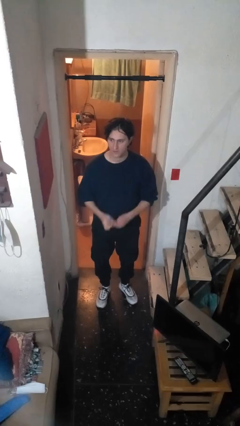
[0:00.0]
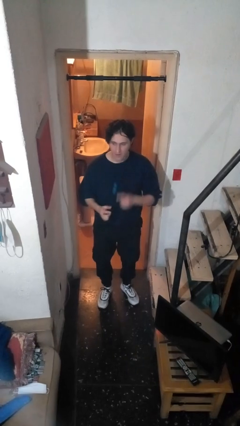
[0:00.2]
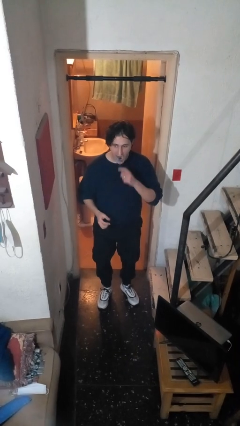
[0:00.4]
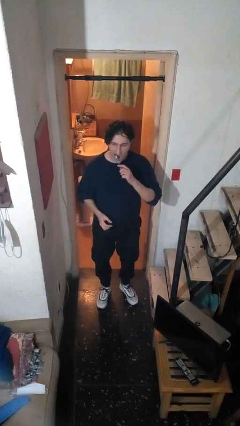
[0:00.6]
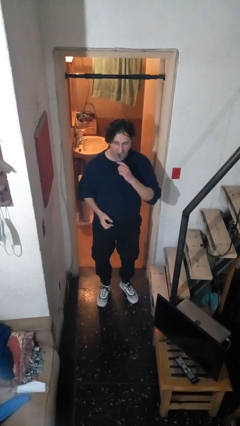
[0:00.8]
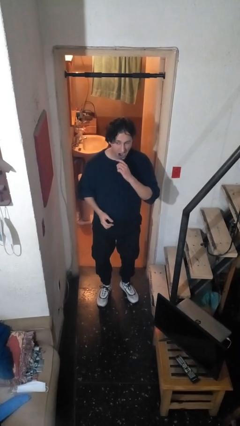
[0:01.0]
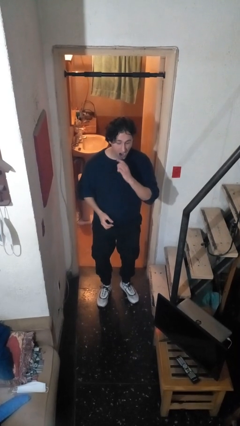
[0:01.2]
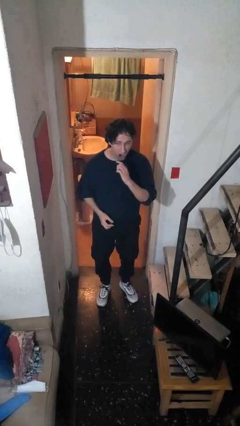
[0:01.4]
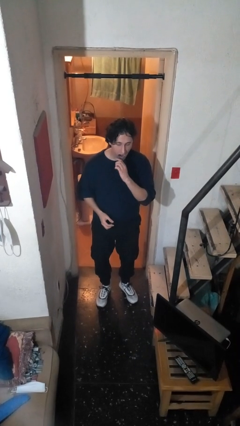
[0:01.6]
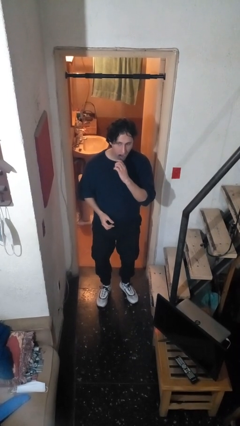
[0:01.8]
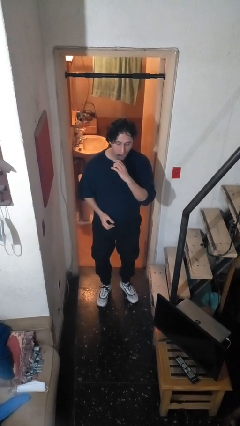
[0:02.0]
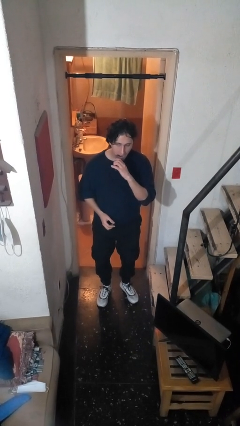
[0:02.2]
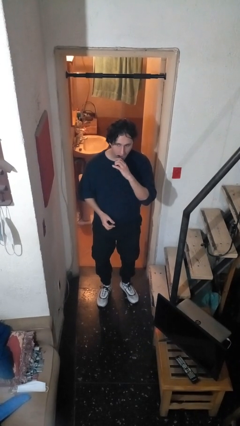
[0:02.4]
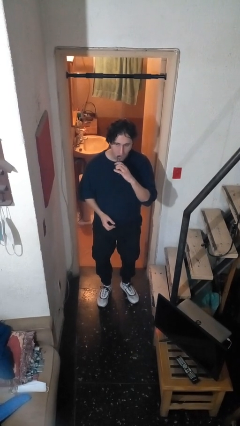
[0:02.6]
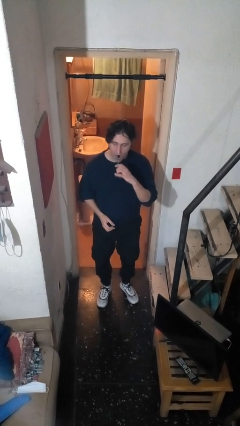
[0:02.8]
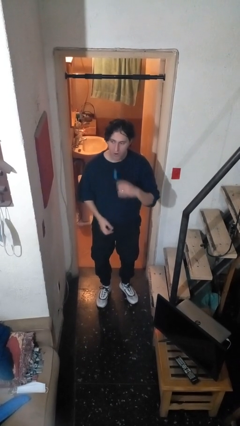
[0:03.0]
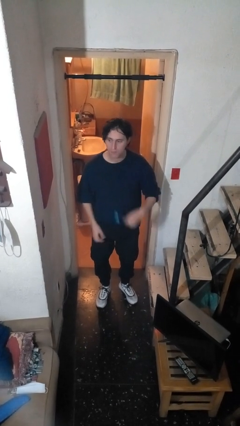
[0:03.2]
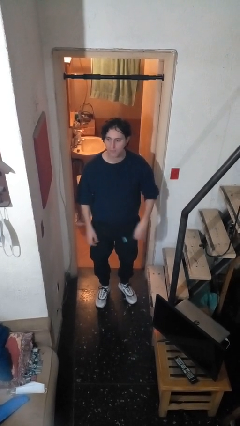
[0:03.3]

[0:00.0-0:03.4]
person brushes teeth

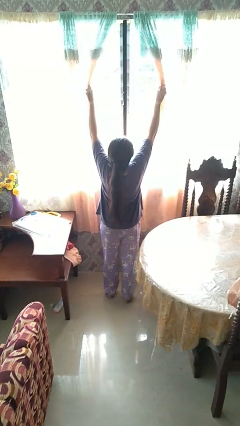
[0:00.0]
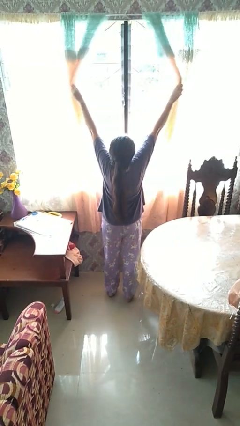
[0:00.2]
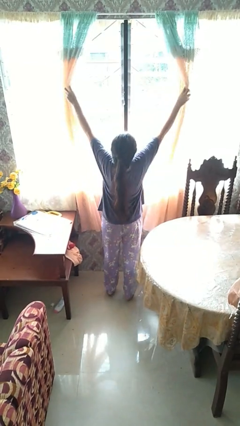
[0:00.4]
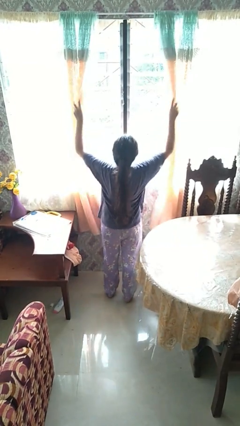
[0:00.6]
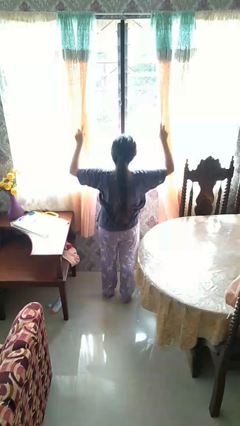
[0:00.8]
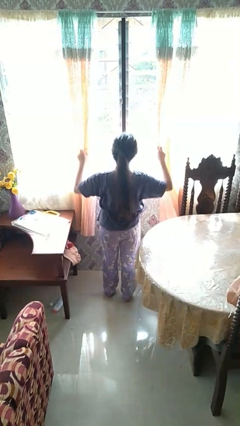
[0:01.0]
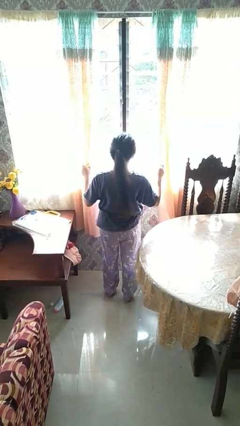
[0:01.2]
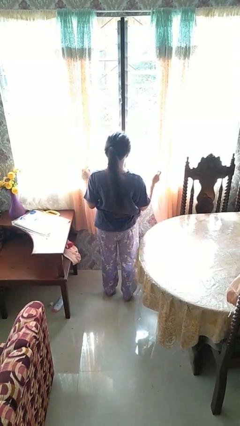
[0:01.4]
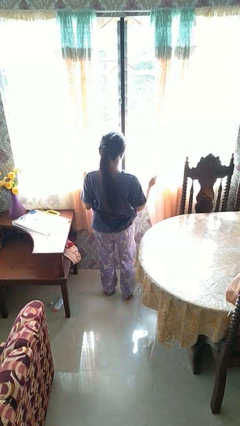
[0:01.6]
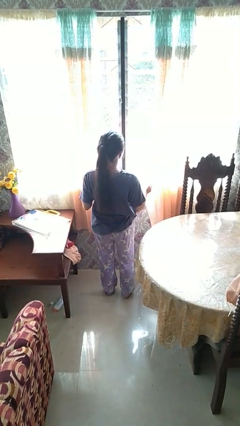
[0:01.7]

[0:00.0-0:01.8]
person opens curtains

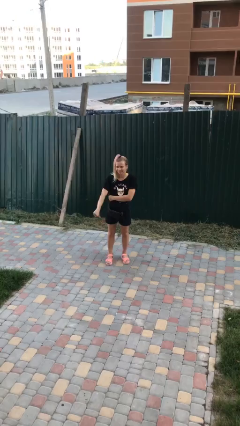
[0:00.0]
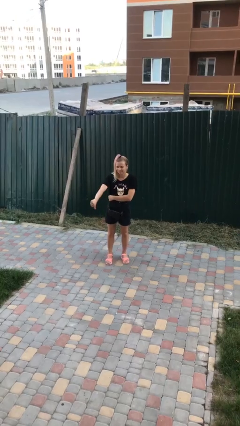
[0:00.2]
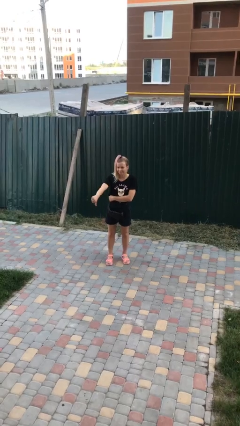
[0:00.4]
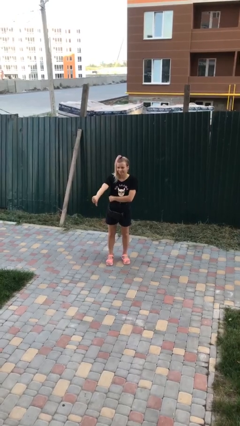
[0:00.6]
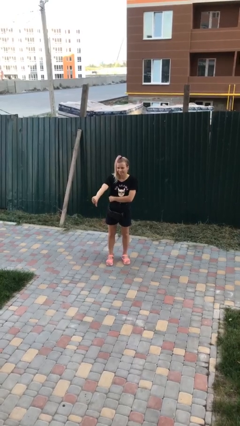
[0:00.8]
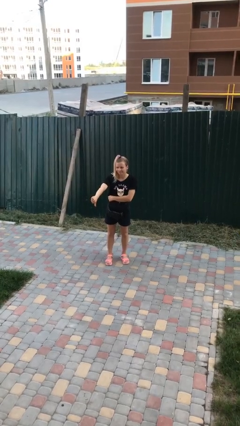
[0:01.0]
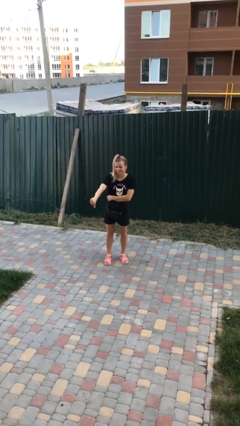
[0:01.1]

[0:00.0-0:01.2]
person gestures thumbs down

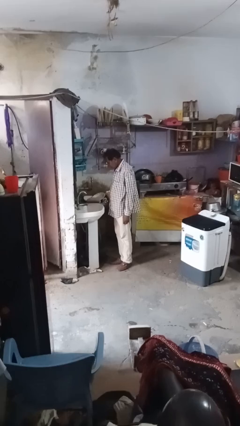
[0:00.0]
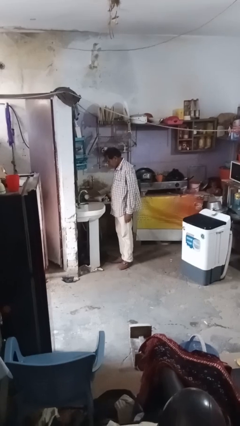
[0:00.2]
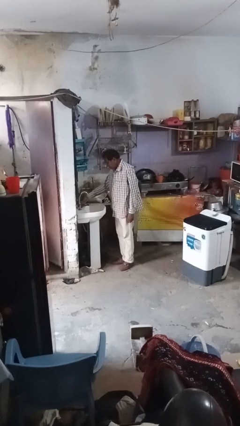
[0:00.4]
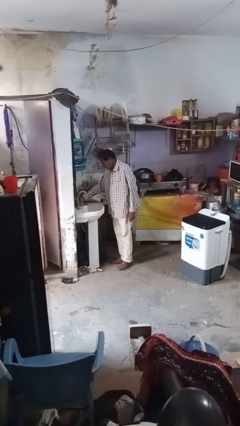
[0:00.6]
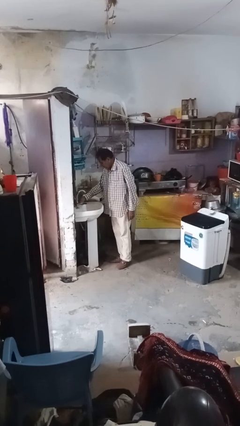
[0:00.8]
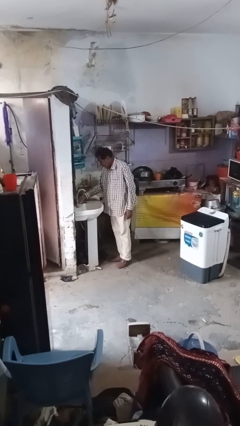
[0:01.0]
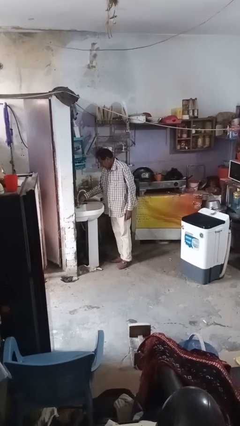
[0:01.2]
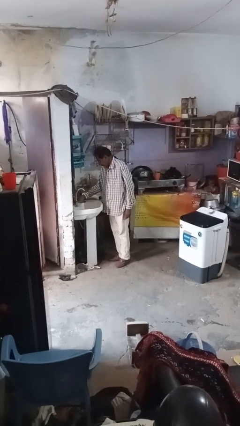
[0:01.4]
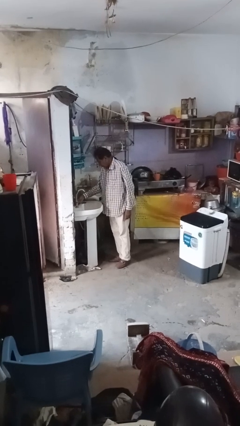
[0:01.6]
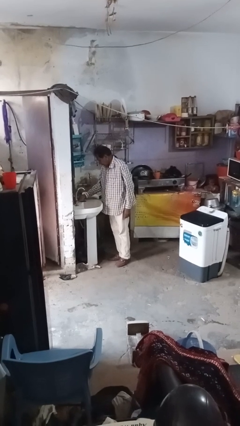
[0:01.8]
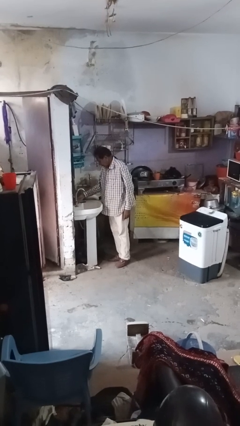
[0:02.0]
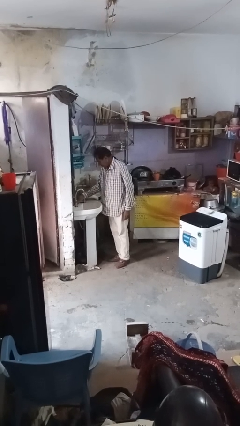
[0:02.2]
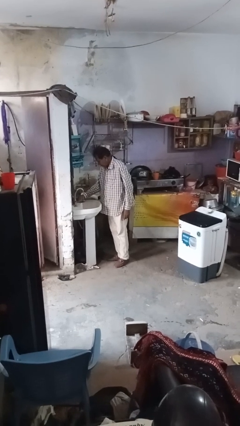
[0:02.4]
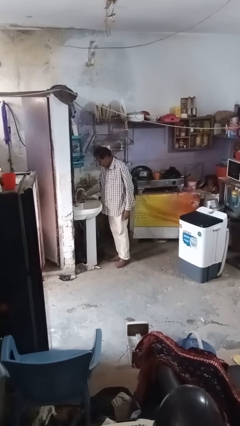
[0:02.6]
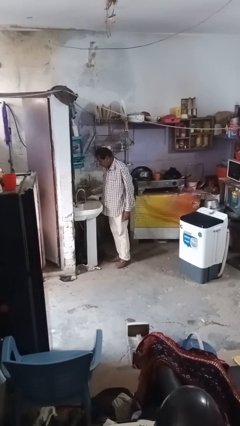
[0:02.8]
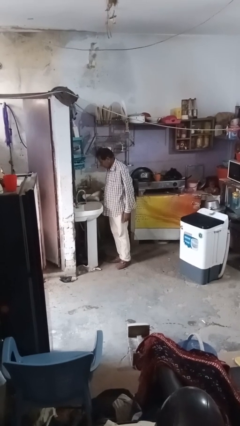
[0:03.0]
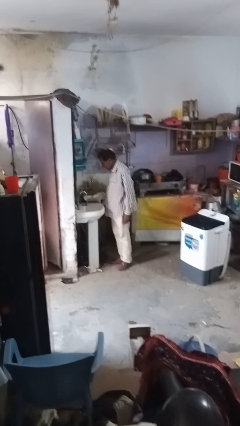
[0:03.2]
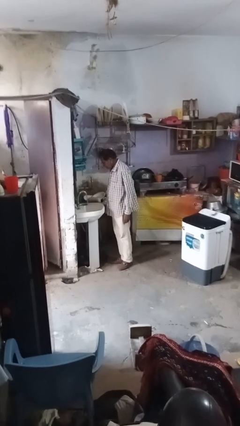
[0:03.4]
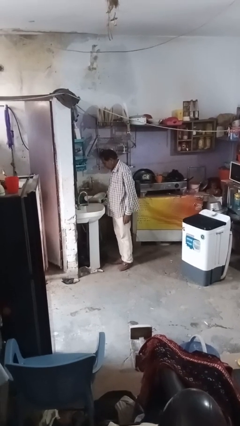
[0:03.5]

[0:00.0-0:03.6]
person turns on faucet

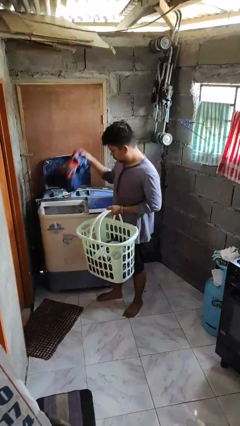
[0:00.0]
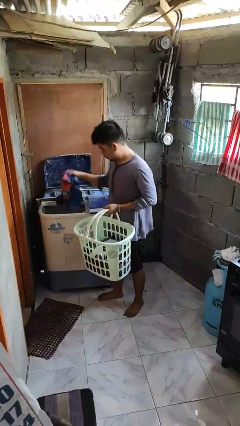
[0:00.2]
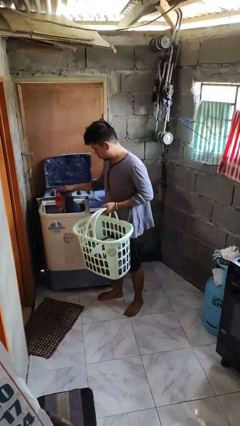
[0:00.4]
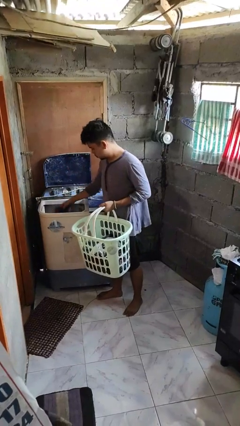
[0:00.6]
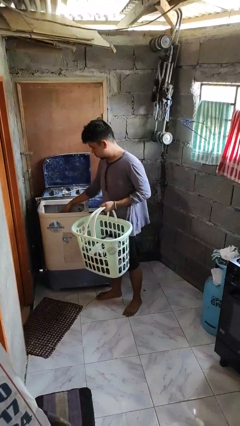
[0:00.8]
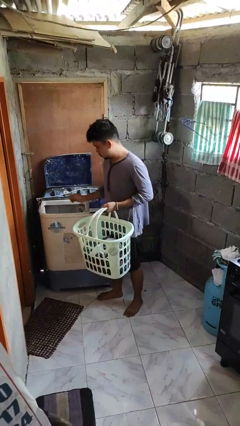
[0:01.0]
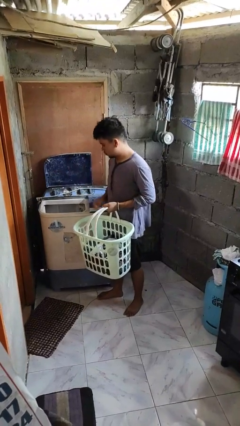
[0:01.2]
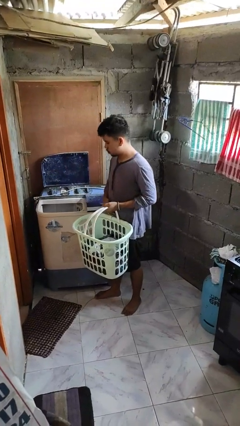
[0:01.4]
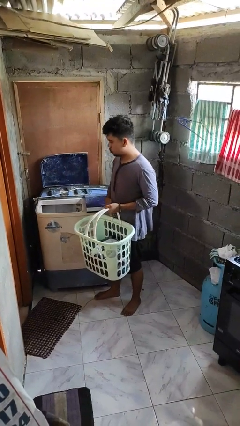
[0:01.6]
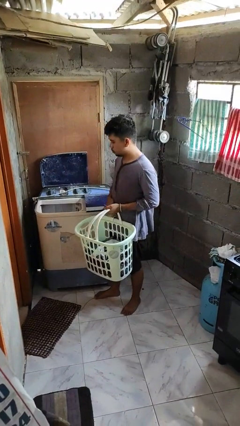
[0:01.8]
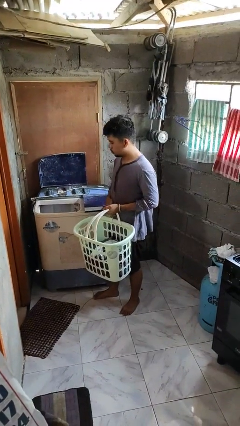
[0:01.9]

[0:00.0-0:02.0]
person loads clotheswasher

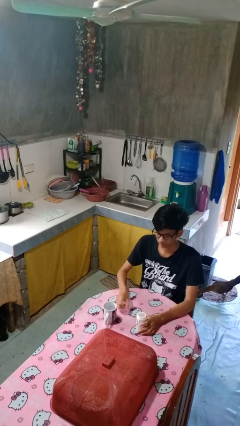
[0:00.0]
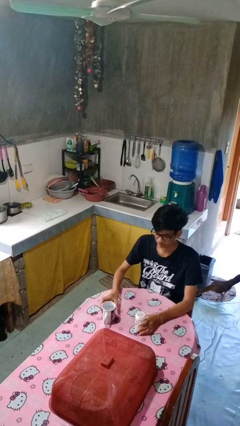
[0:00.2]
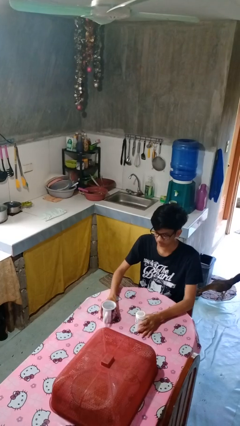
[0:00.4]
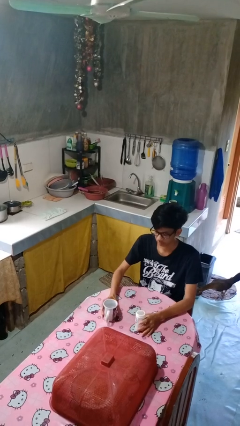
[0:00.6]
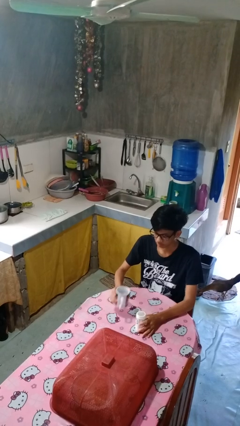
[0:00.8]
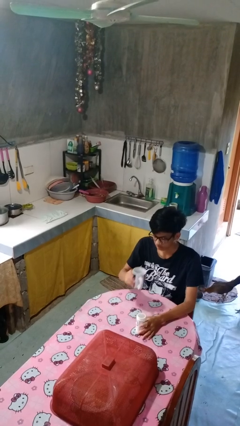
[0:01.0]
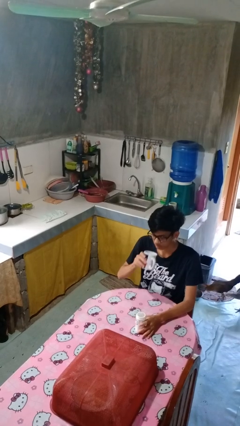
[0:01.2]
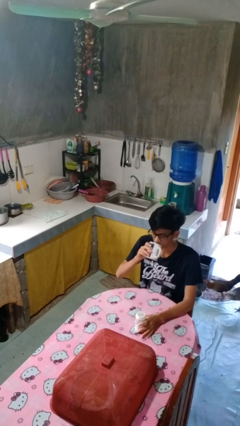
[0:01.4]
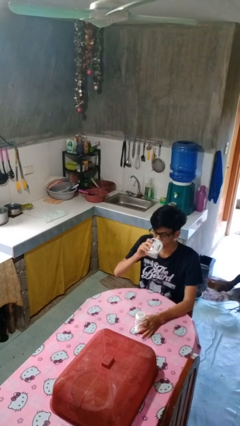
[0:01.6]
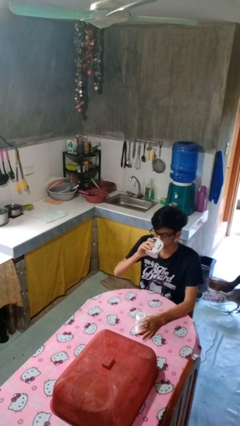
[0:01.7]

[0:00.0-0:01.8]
person drinks from cup

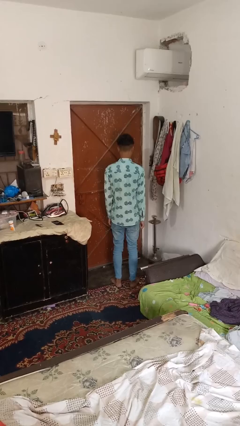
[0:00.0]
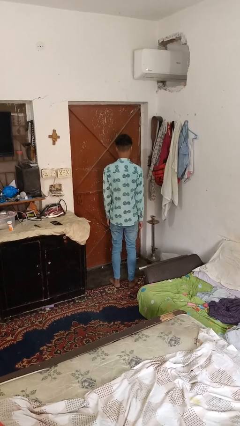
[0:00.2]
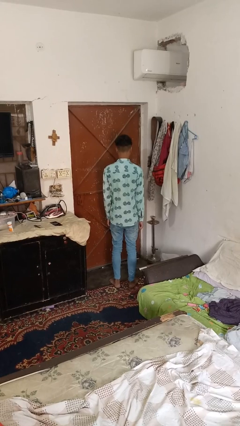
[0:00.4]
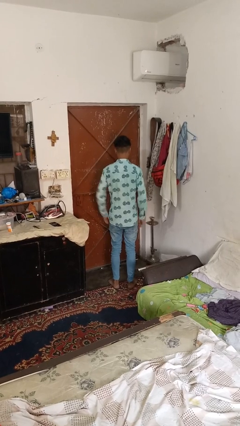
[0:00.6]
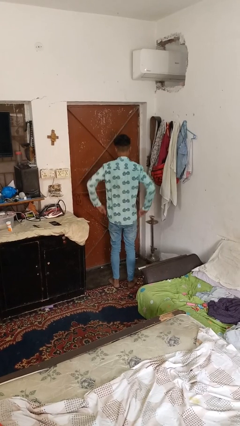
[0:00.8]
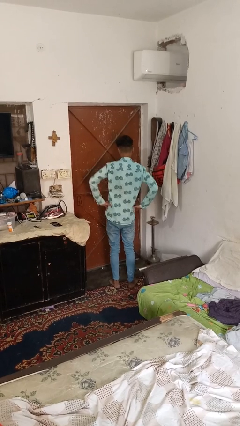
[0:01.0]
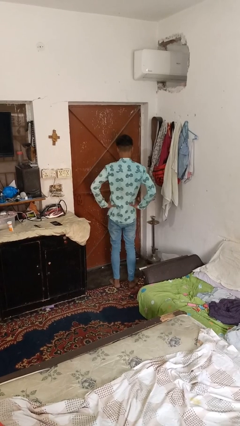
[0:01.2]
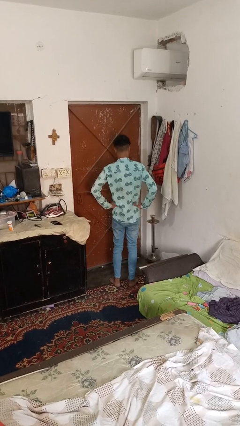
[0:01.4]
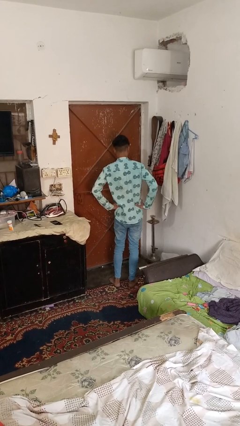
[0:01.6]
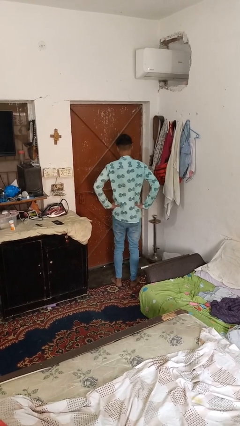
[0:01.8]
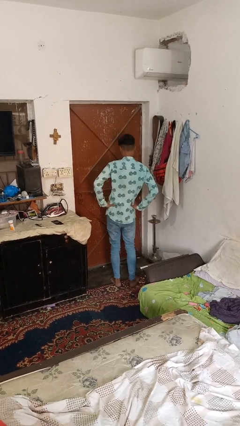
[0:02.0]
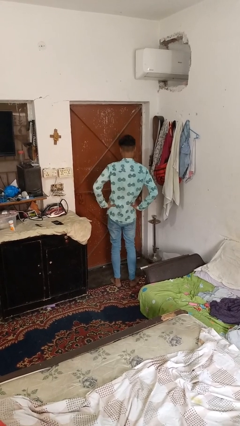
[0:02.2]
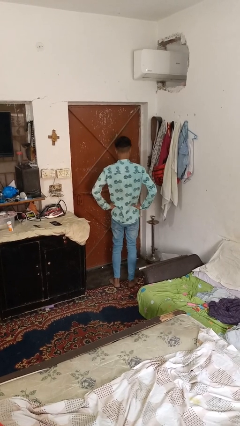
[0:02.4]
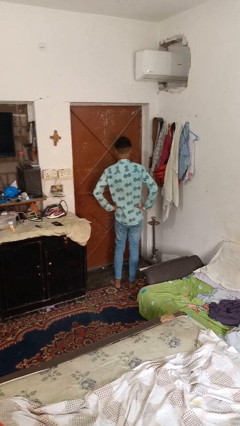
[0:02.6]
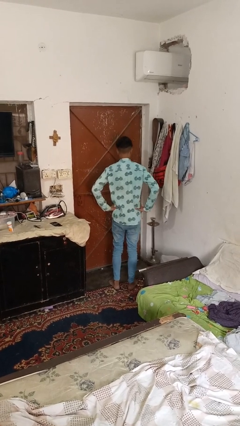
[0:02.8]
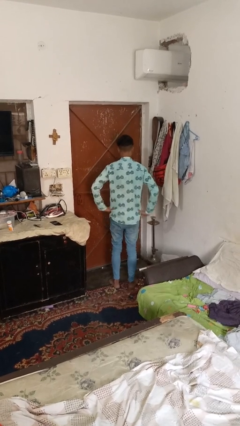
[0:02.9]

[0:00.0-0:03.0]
person wiggles hips

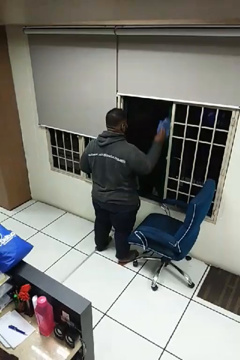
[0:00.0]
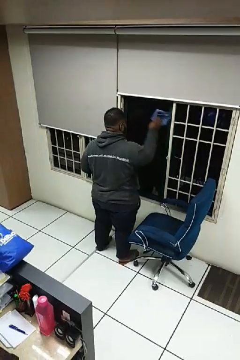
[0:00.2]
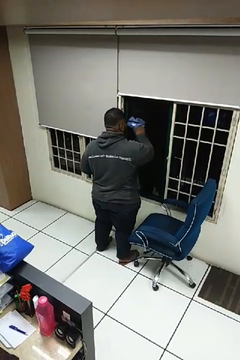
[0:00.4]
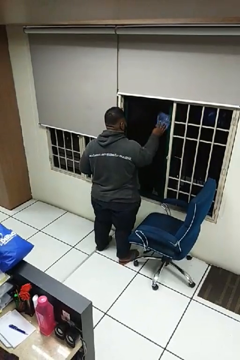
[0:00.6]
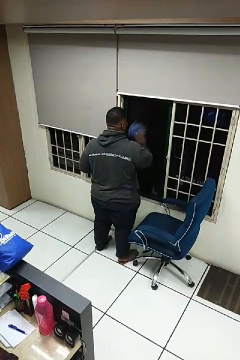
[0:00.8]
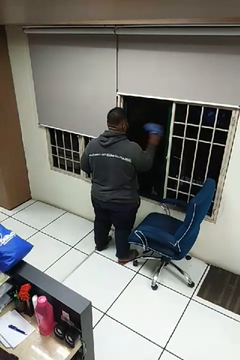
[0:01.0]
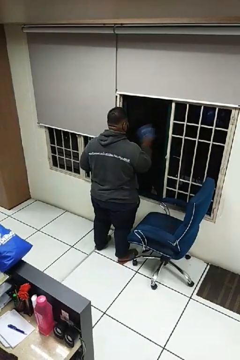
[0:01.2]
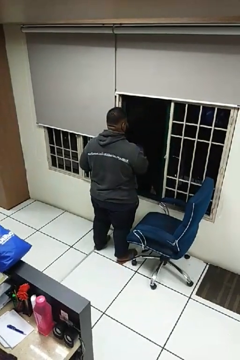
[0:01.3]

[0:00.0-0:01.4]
person washes window
